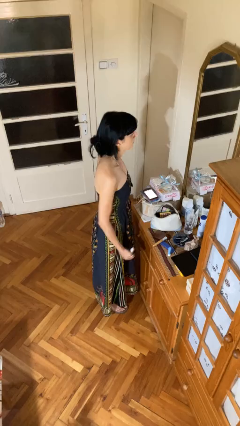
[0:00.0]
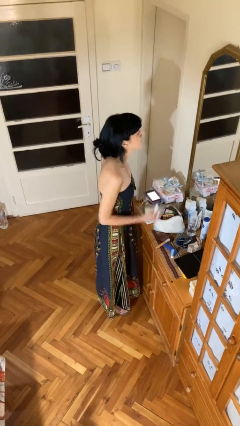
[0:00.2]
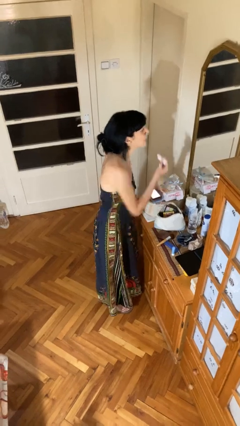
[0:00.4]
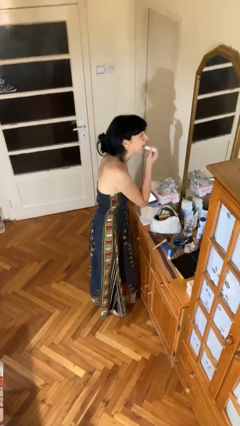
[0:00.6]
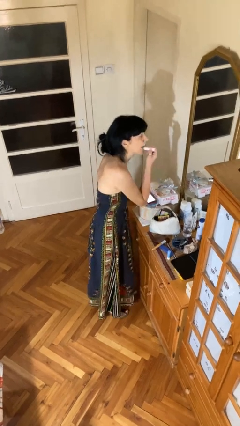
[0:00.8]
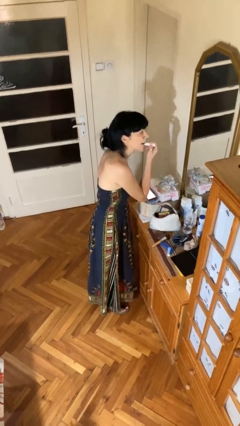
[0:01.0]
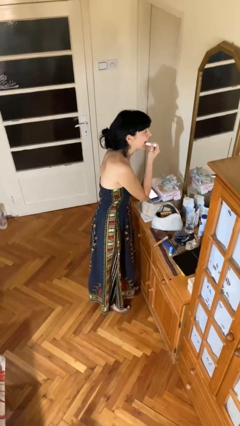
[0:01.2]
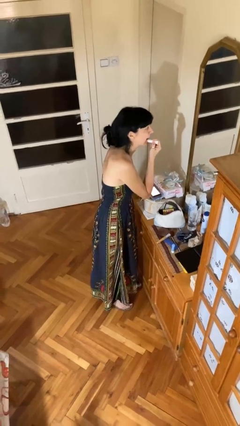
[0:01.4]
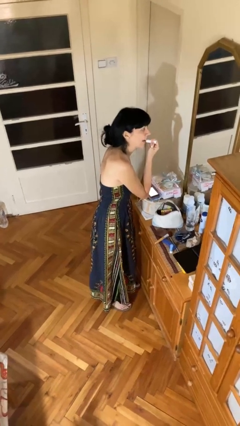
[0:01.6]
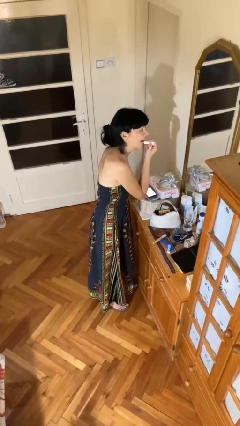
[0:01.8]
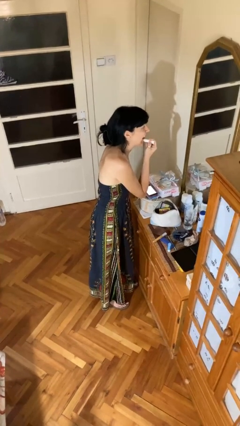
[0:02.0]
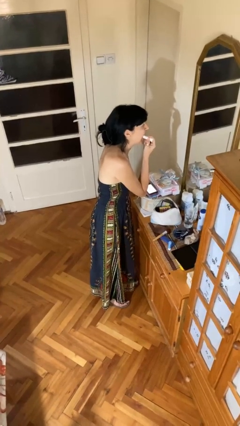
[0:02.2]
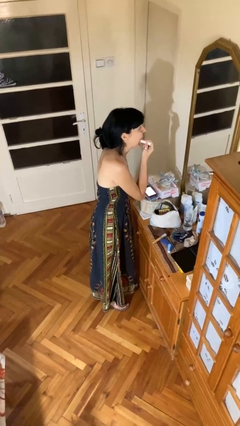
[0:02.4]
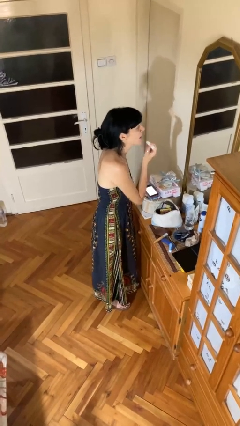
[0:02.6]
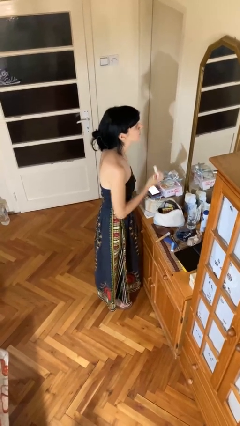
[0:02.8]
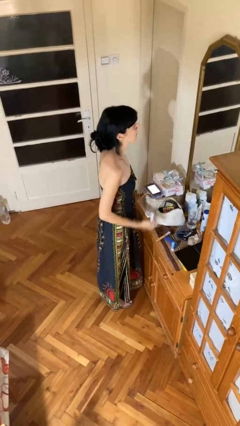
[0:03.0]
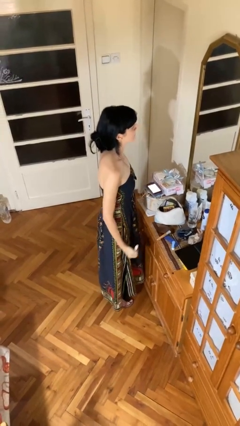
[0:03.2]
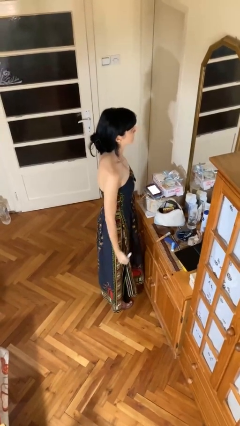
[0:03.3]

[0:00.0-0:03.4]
person applies lip makeup

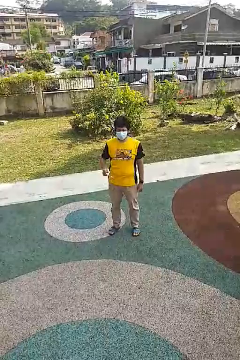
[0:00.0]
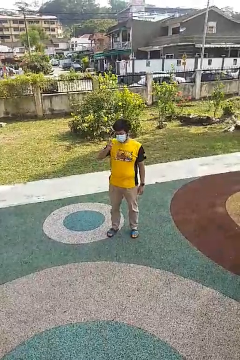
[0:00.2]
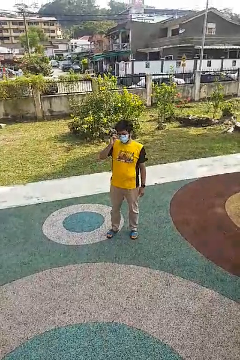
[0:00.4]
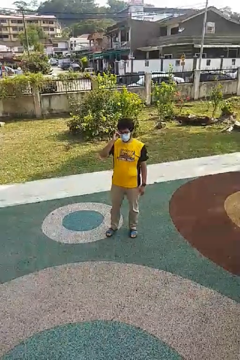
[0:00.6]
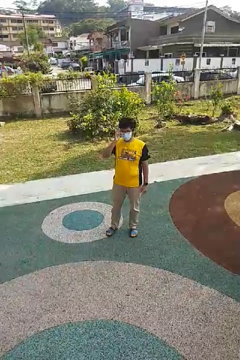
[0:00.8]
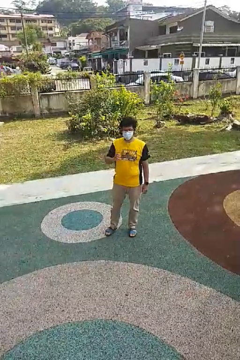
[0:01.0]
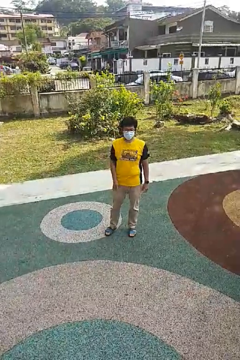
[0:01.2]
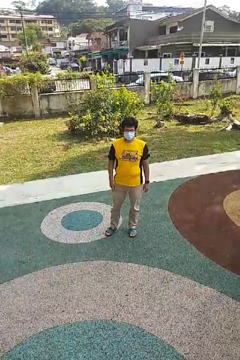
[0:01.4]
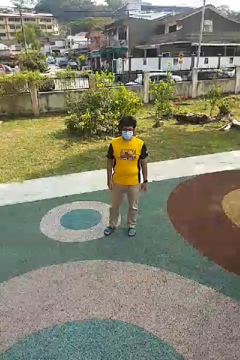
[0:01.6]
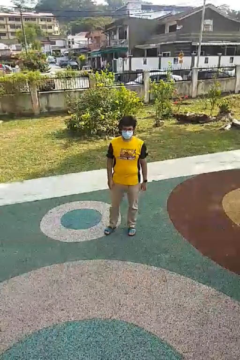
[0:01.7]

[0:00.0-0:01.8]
person puts on glasses

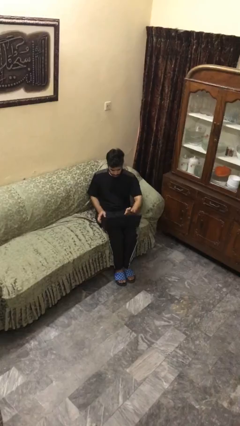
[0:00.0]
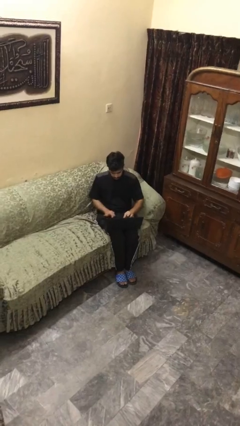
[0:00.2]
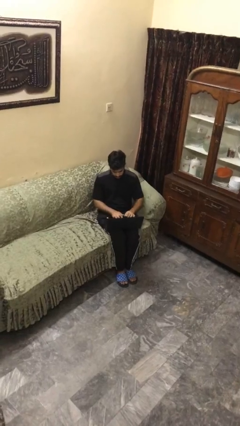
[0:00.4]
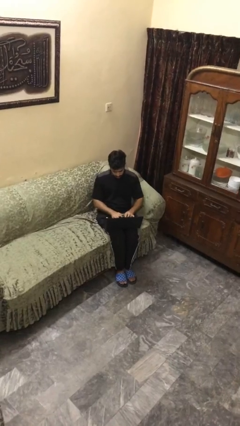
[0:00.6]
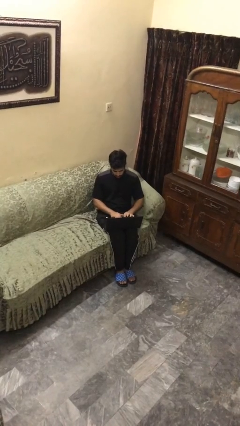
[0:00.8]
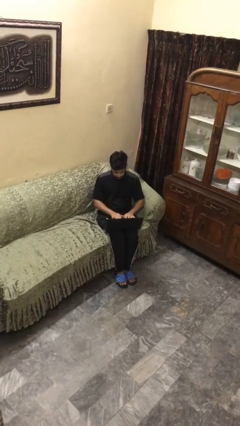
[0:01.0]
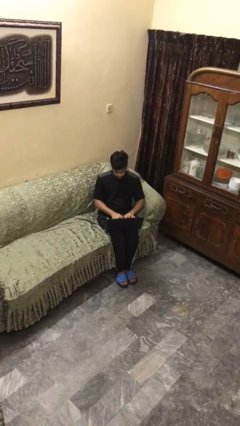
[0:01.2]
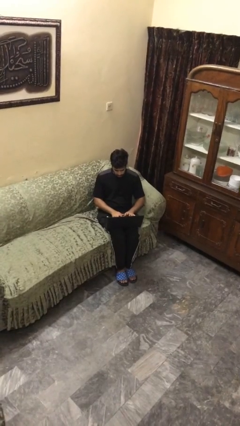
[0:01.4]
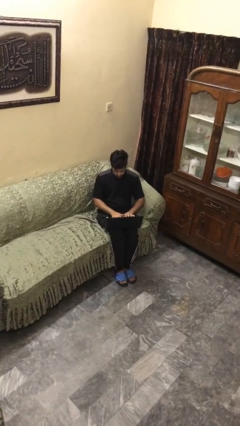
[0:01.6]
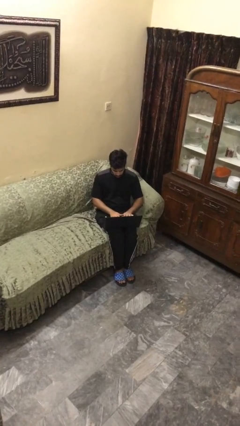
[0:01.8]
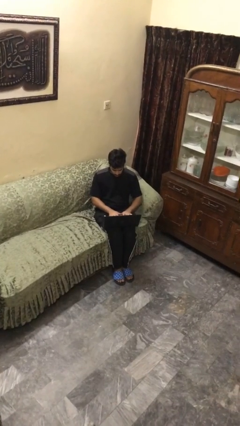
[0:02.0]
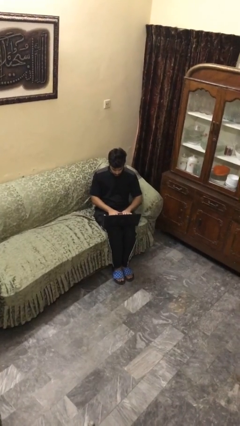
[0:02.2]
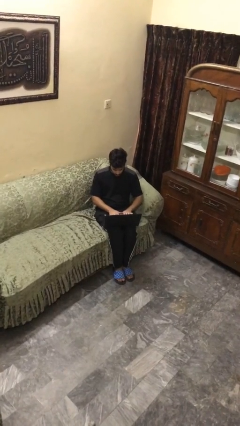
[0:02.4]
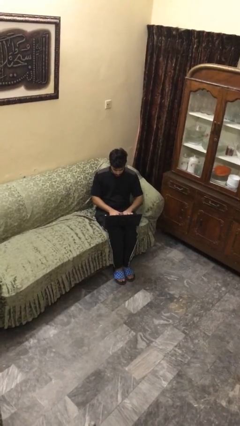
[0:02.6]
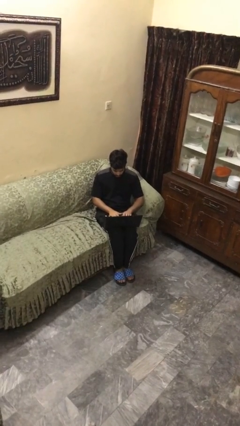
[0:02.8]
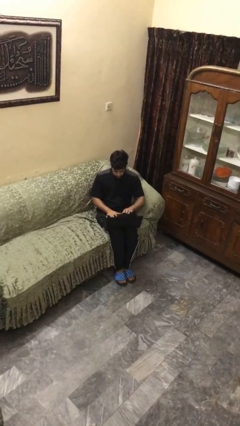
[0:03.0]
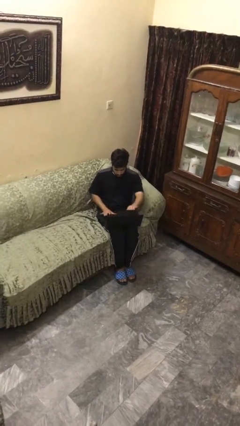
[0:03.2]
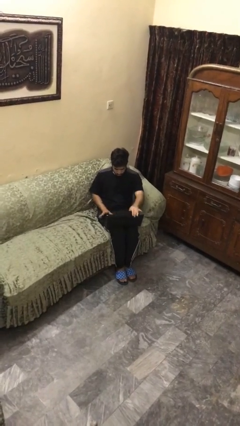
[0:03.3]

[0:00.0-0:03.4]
person interacts with laptop

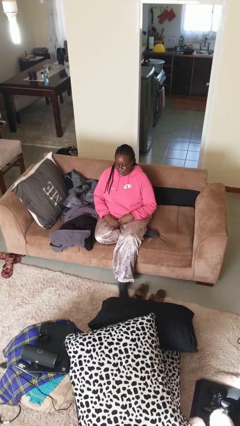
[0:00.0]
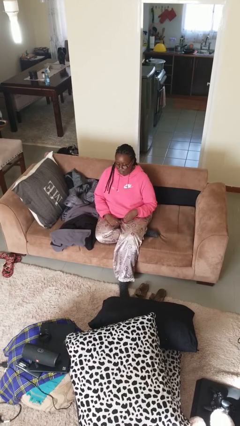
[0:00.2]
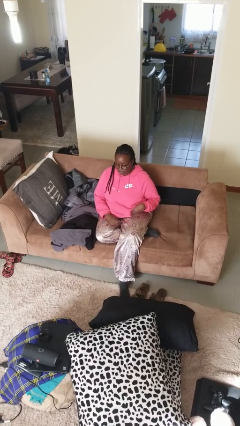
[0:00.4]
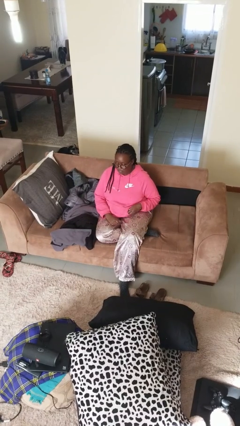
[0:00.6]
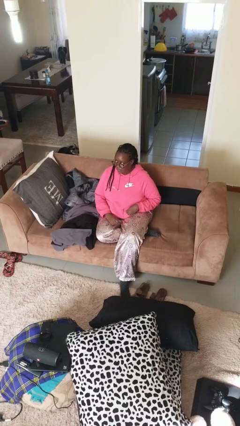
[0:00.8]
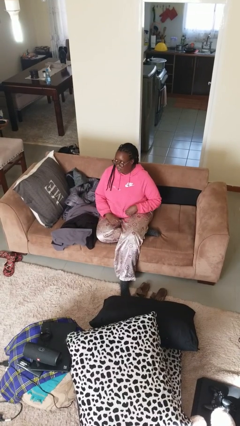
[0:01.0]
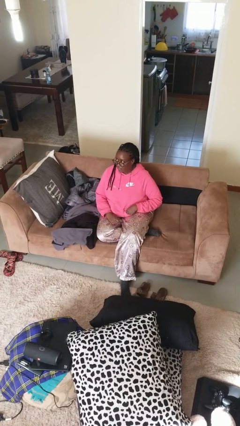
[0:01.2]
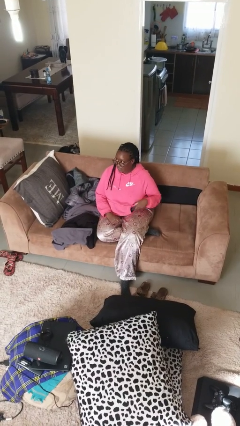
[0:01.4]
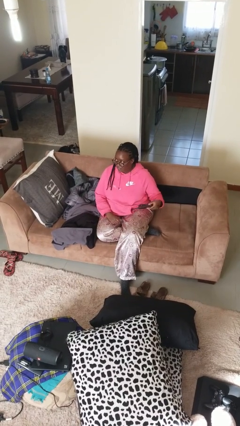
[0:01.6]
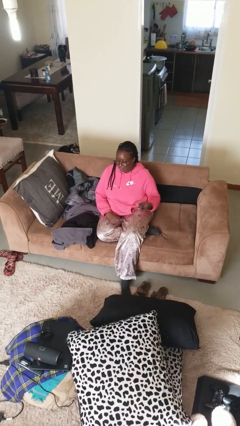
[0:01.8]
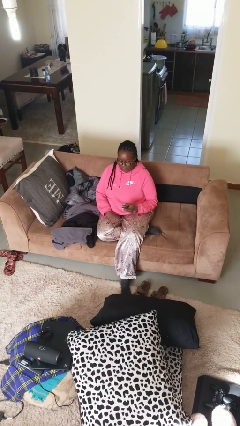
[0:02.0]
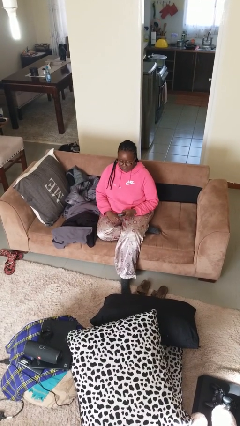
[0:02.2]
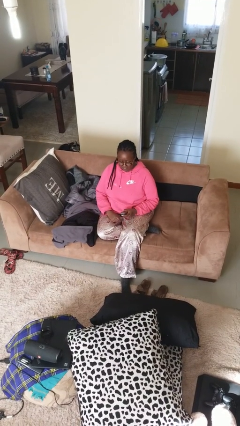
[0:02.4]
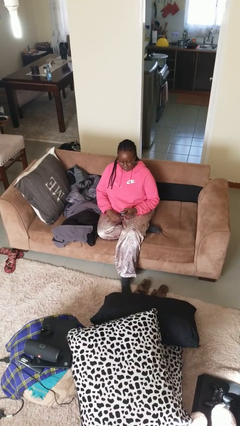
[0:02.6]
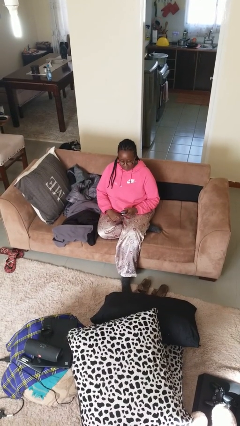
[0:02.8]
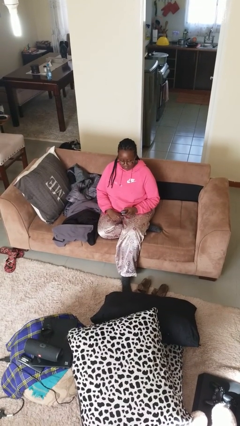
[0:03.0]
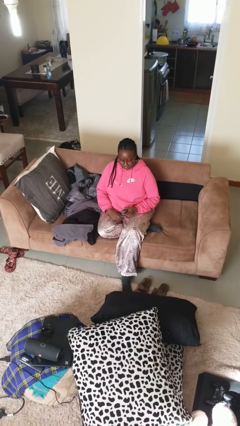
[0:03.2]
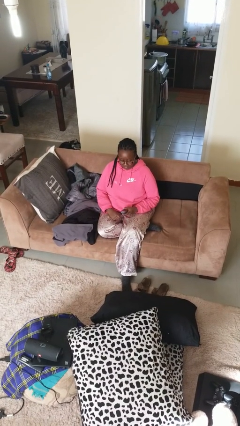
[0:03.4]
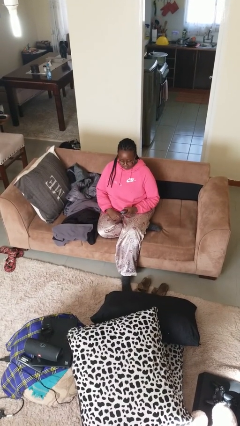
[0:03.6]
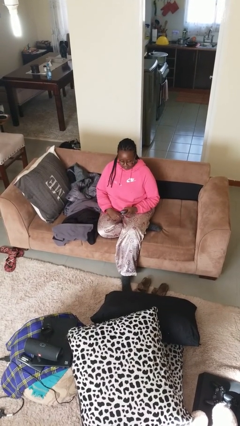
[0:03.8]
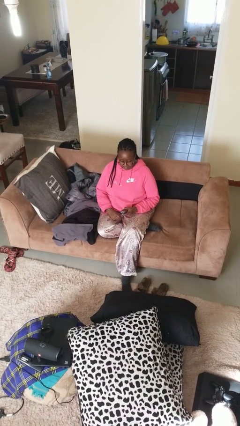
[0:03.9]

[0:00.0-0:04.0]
person takes phone from pocket

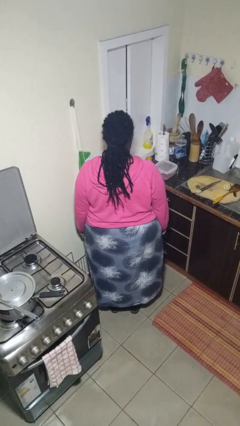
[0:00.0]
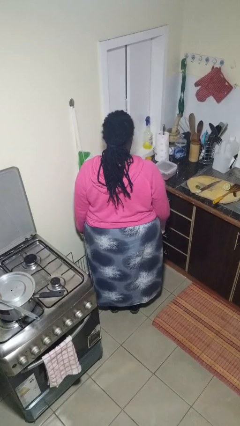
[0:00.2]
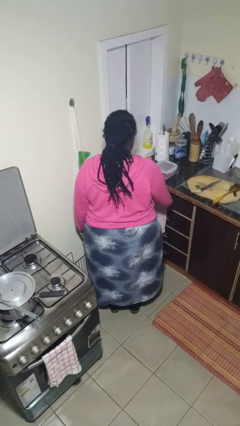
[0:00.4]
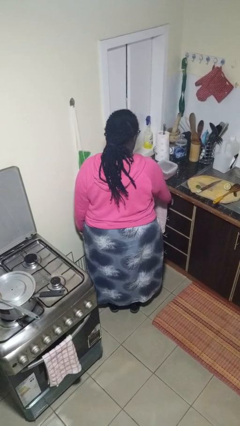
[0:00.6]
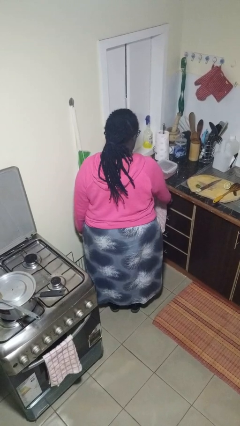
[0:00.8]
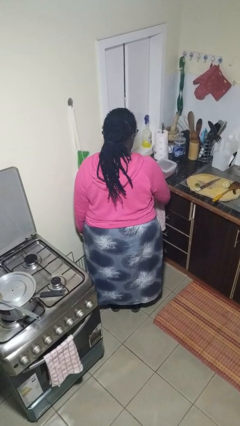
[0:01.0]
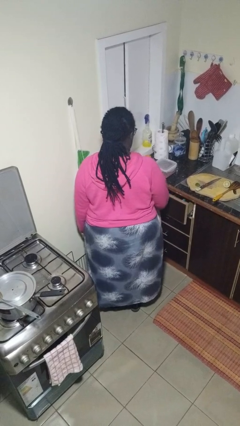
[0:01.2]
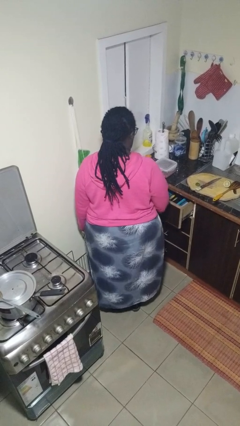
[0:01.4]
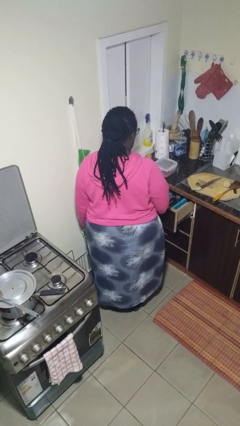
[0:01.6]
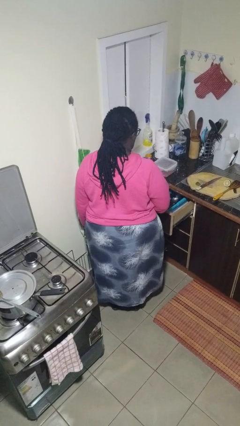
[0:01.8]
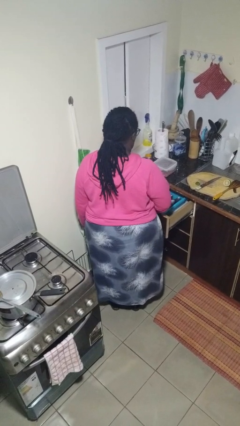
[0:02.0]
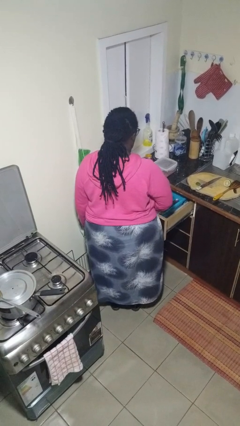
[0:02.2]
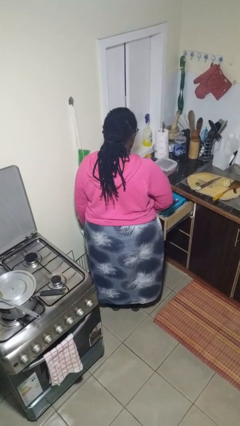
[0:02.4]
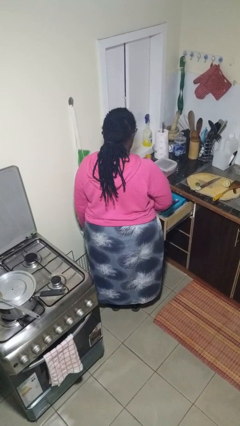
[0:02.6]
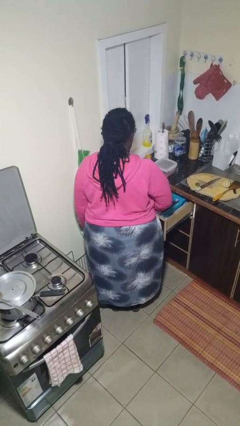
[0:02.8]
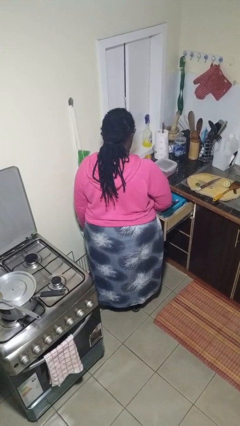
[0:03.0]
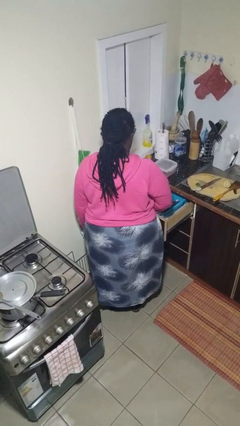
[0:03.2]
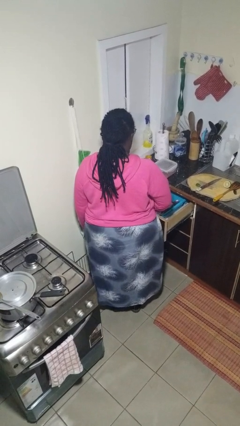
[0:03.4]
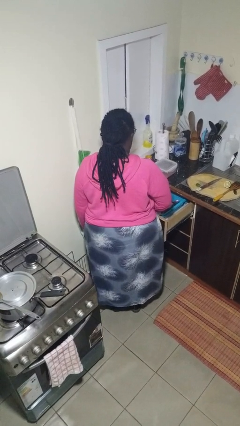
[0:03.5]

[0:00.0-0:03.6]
person opens kitchen drawer

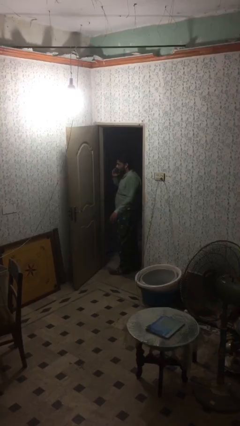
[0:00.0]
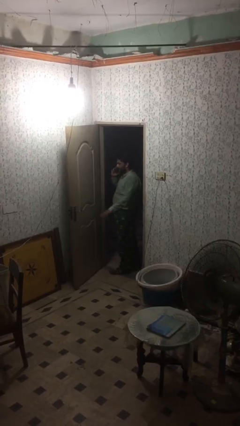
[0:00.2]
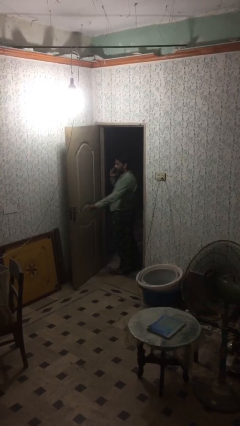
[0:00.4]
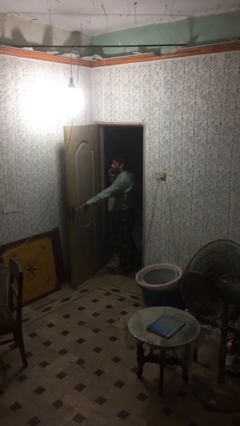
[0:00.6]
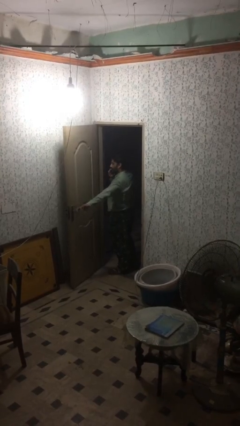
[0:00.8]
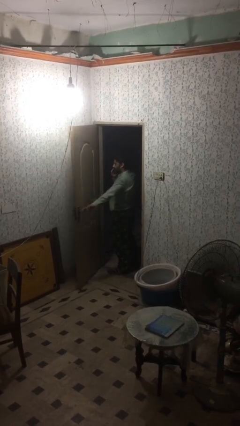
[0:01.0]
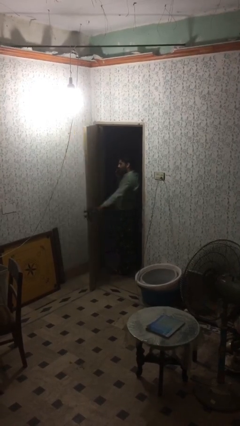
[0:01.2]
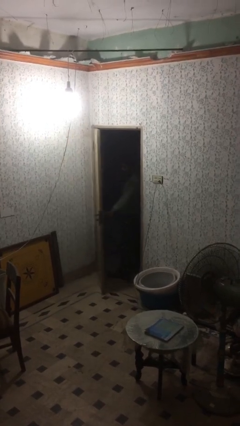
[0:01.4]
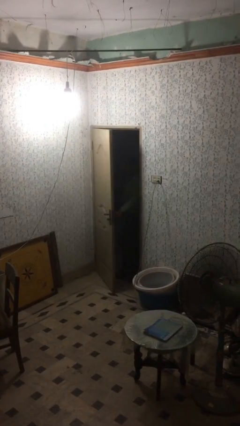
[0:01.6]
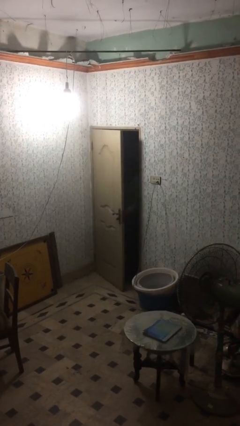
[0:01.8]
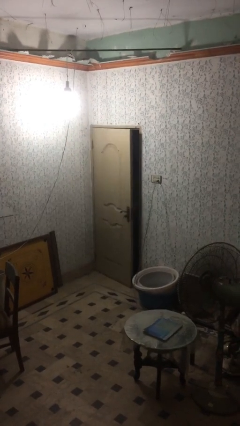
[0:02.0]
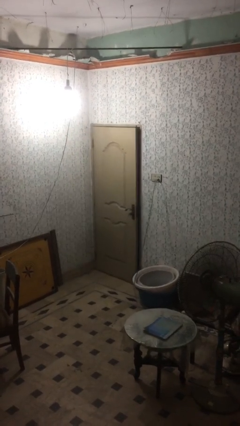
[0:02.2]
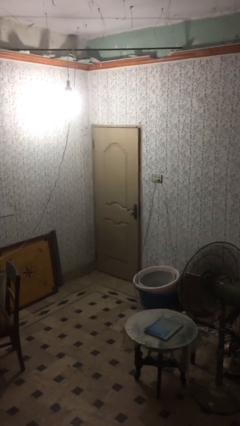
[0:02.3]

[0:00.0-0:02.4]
person closes facility door
